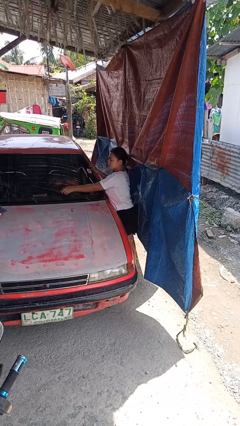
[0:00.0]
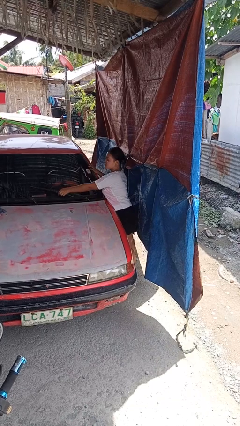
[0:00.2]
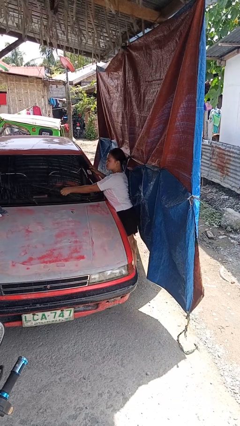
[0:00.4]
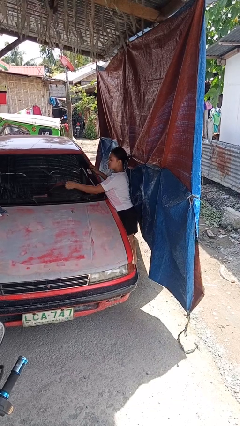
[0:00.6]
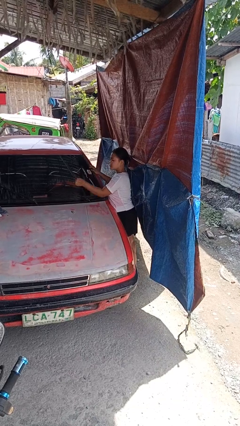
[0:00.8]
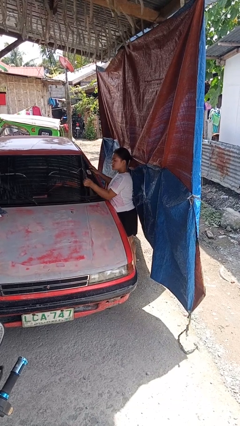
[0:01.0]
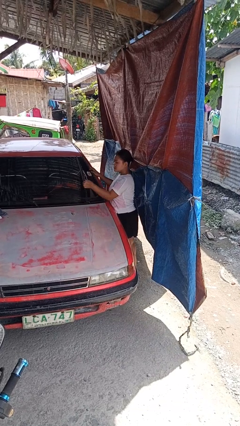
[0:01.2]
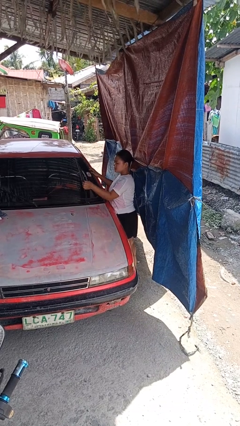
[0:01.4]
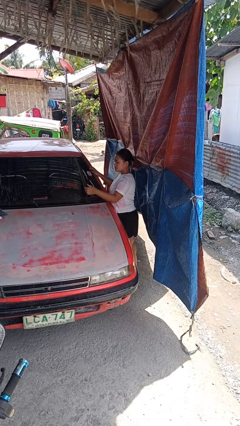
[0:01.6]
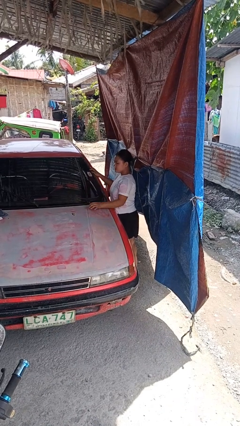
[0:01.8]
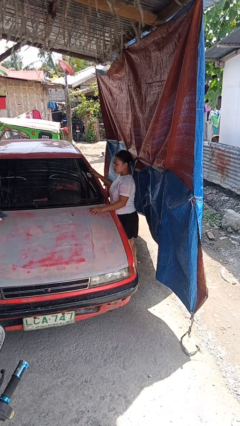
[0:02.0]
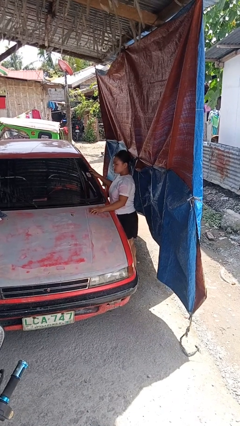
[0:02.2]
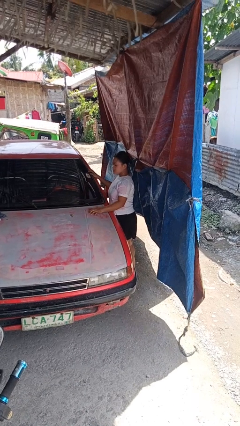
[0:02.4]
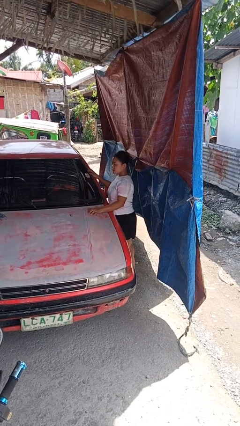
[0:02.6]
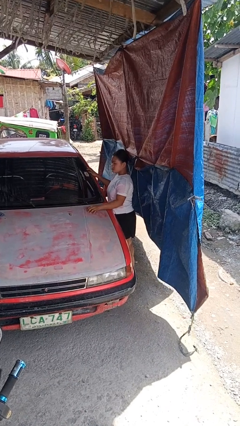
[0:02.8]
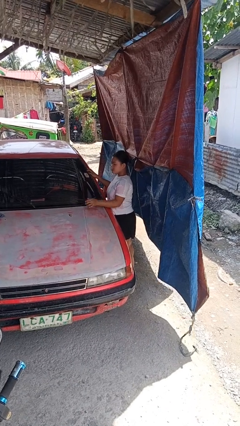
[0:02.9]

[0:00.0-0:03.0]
person flips up car wipers

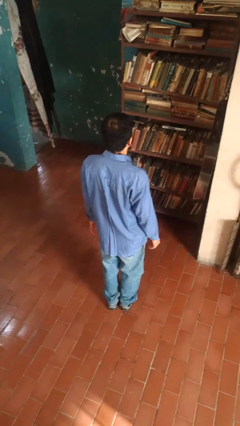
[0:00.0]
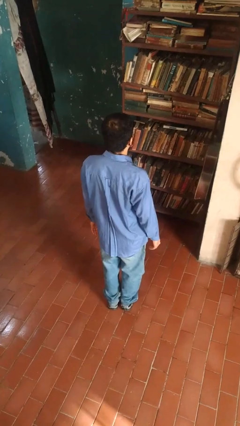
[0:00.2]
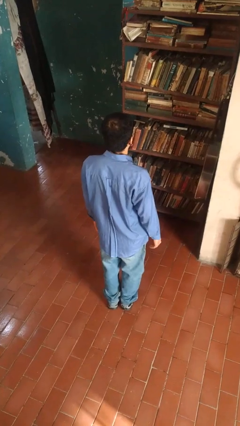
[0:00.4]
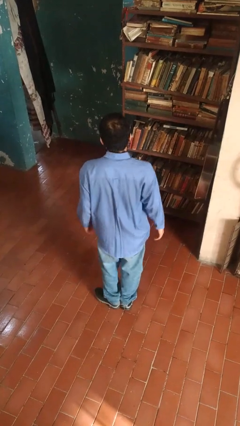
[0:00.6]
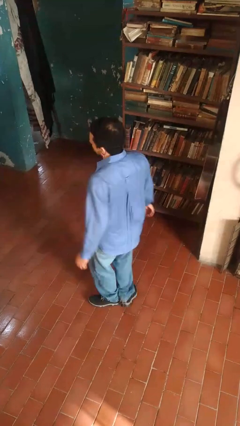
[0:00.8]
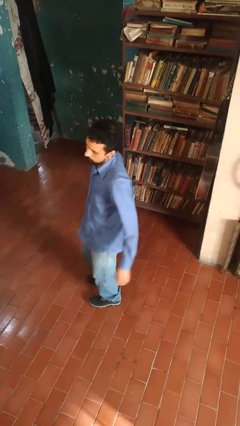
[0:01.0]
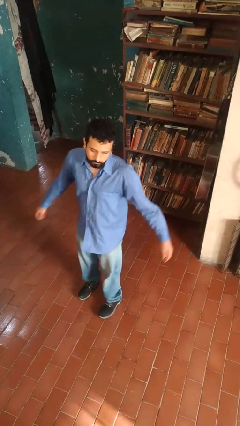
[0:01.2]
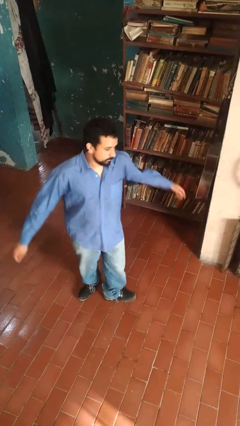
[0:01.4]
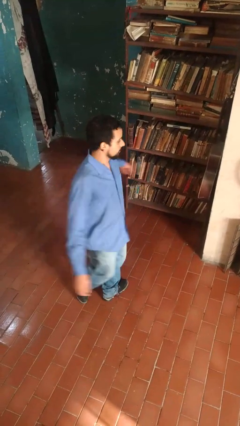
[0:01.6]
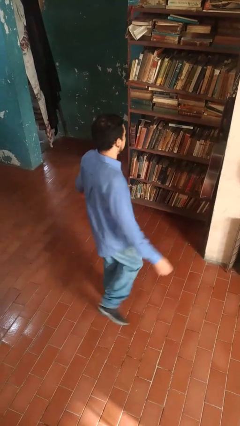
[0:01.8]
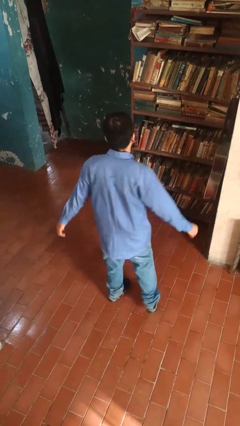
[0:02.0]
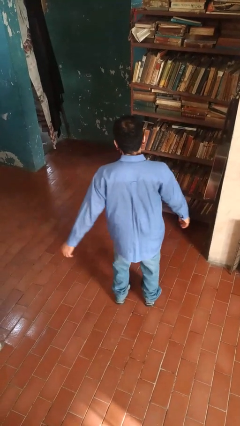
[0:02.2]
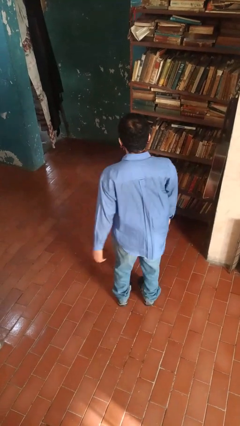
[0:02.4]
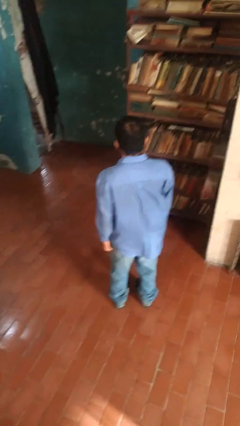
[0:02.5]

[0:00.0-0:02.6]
person twirls

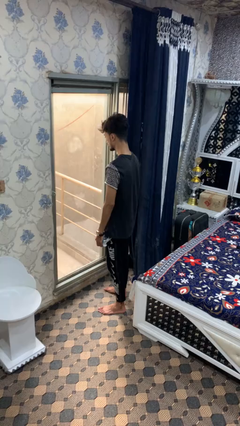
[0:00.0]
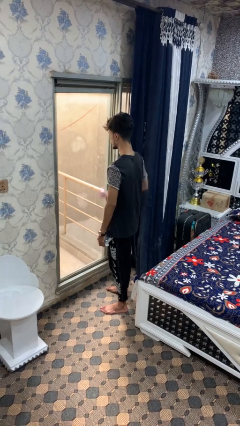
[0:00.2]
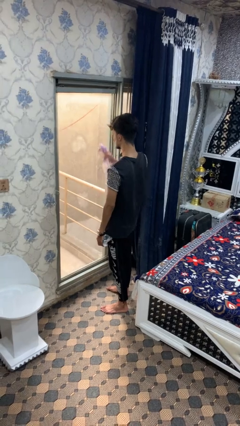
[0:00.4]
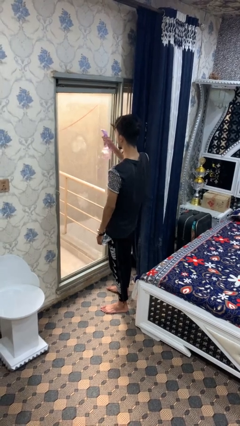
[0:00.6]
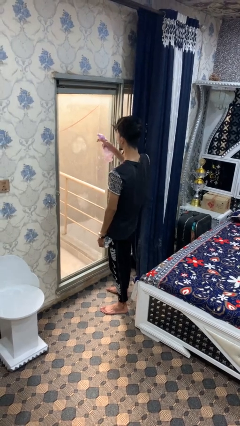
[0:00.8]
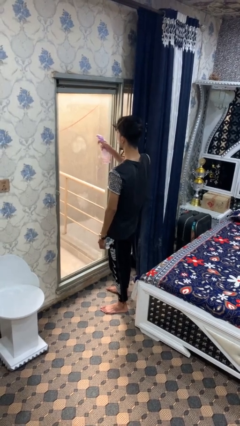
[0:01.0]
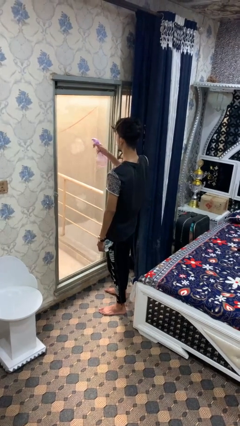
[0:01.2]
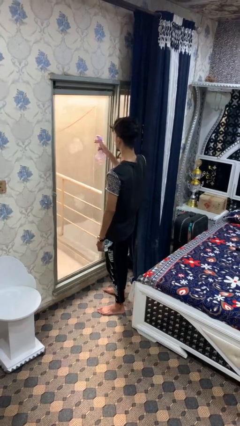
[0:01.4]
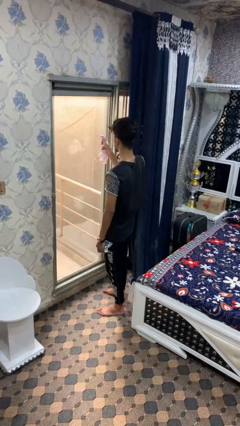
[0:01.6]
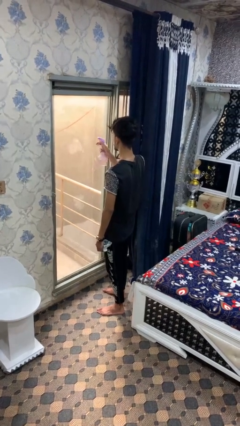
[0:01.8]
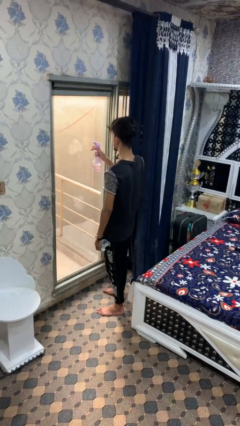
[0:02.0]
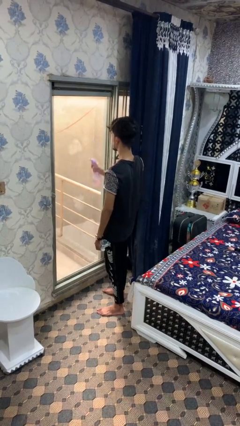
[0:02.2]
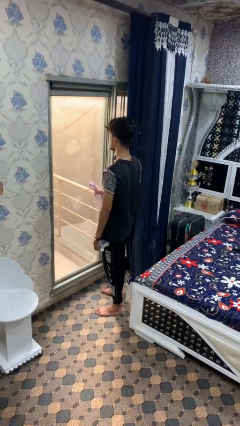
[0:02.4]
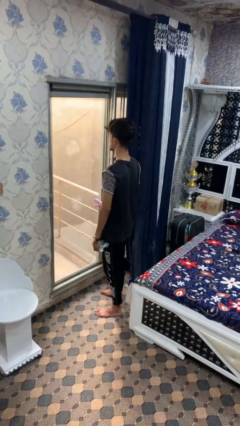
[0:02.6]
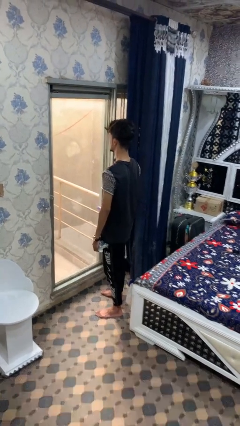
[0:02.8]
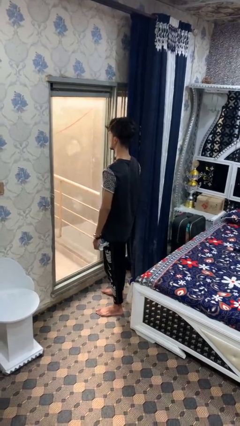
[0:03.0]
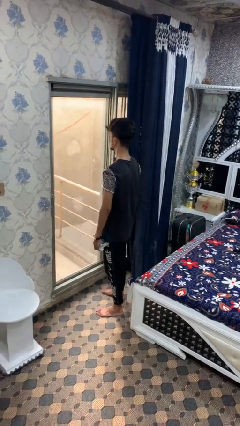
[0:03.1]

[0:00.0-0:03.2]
person sprays from bottle

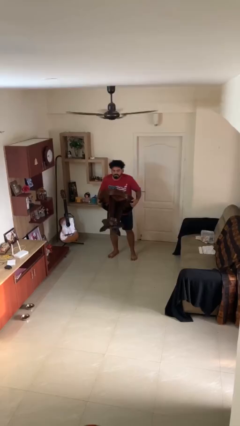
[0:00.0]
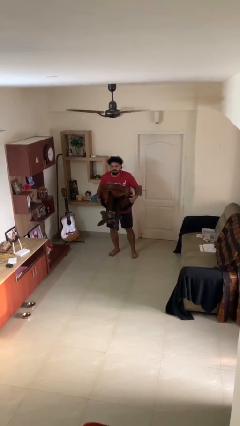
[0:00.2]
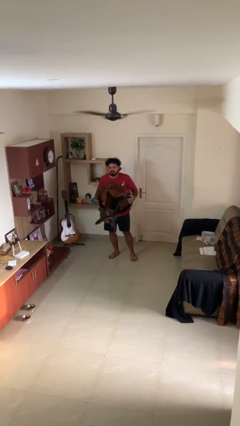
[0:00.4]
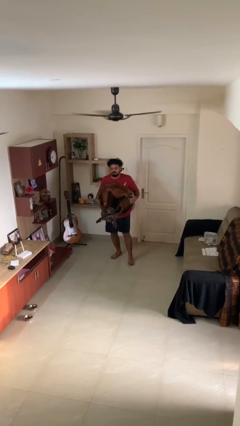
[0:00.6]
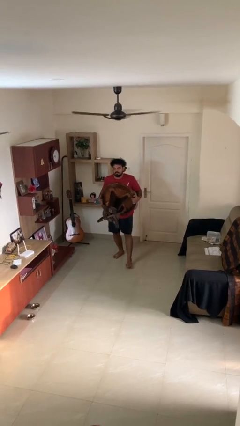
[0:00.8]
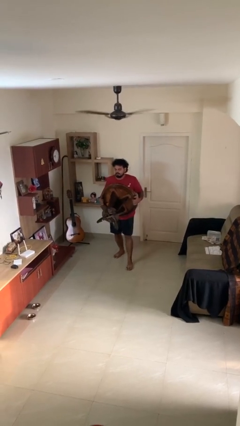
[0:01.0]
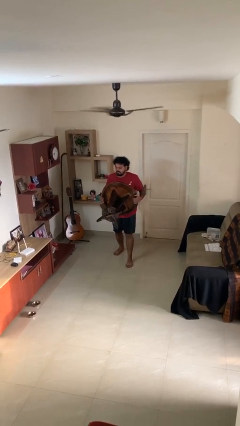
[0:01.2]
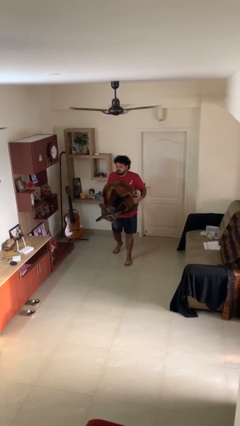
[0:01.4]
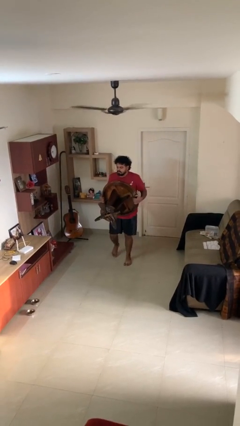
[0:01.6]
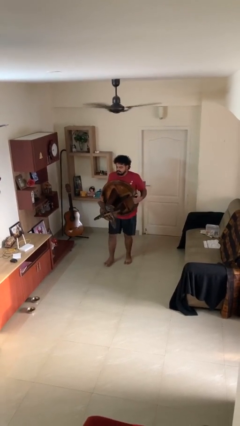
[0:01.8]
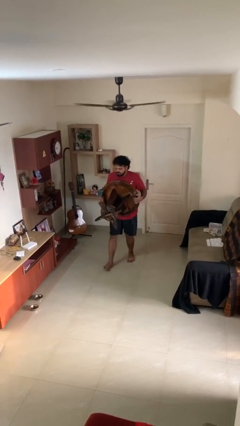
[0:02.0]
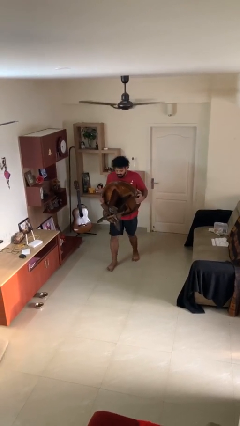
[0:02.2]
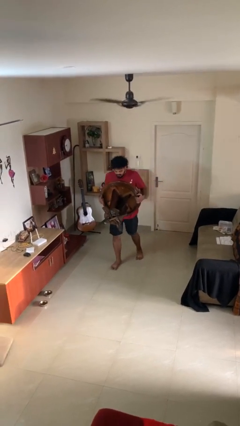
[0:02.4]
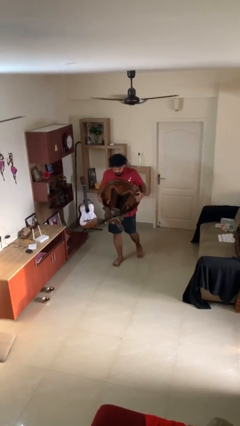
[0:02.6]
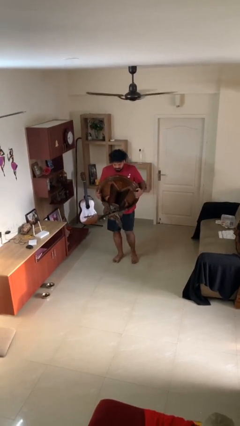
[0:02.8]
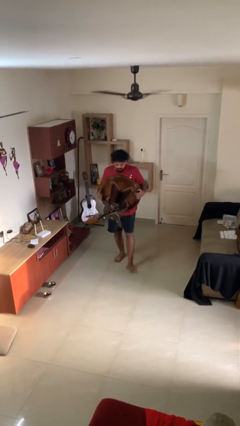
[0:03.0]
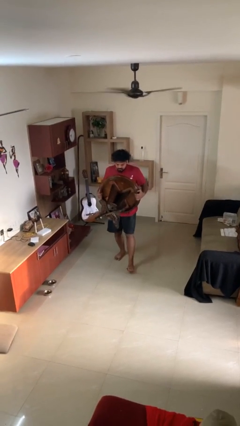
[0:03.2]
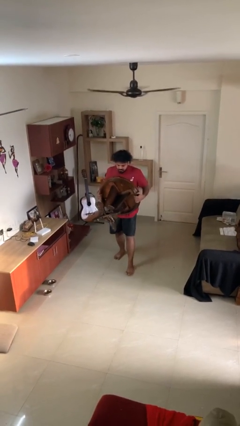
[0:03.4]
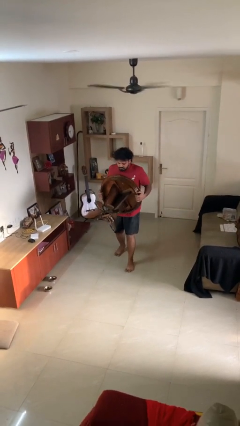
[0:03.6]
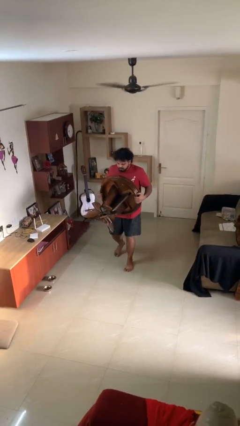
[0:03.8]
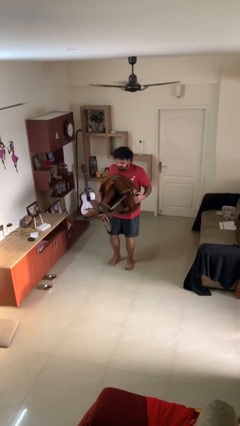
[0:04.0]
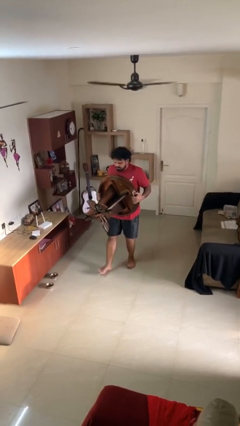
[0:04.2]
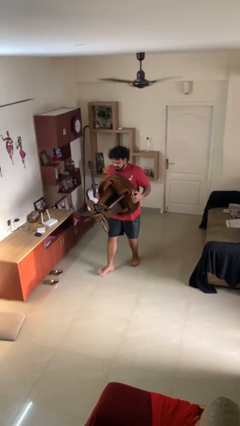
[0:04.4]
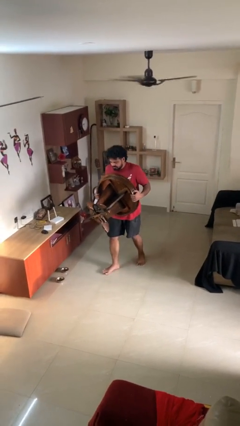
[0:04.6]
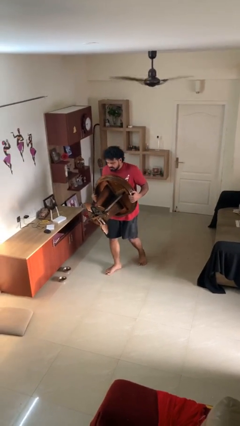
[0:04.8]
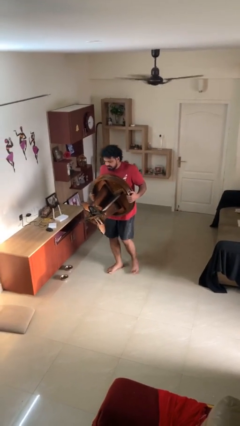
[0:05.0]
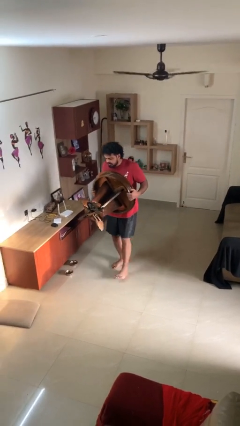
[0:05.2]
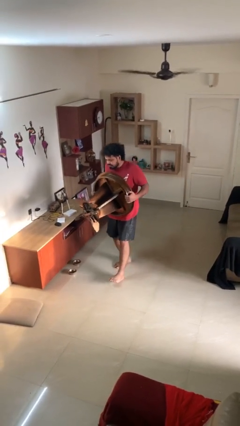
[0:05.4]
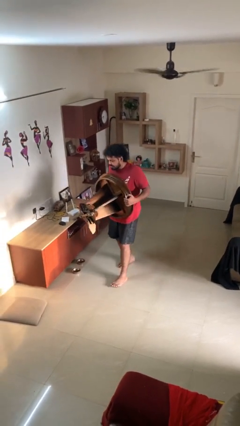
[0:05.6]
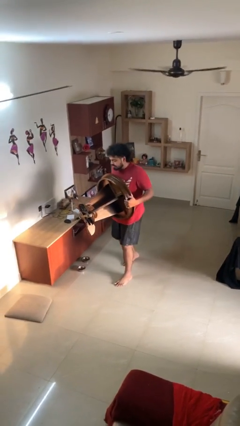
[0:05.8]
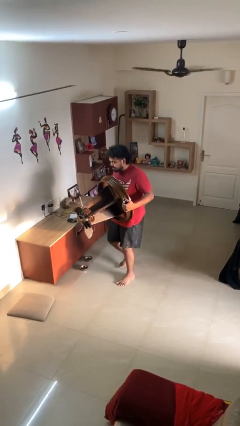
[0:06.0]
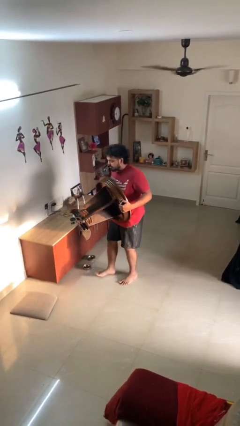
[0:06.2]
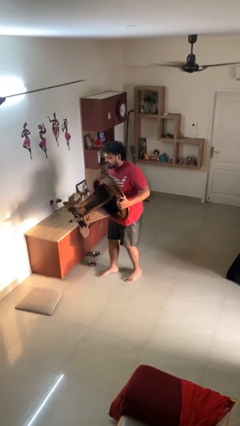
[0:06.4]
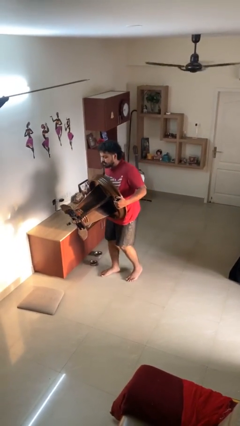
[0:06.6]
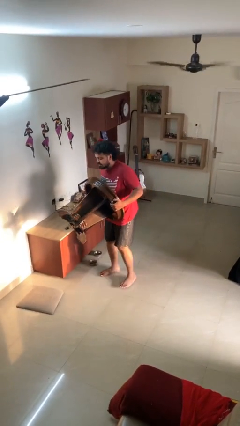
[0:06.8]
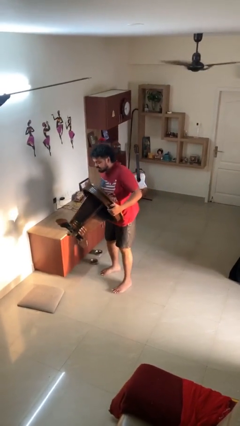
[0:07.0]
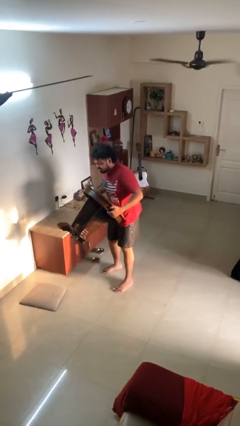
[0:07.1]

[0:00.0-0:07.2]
person carries heavy object

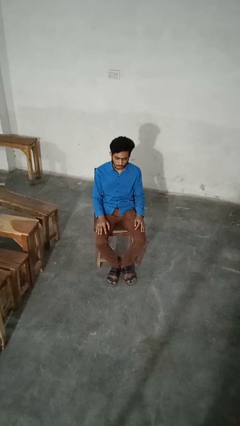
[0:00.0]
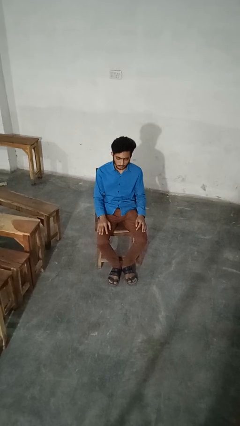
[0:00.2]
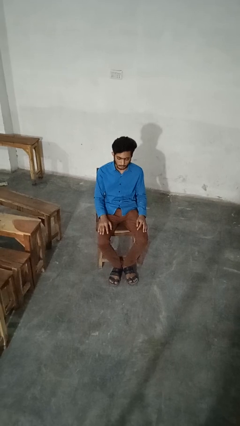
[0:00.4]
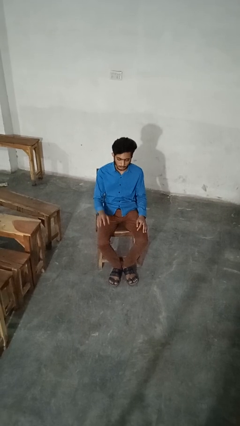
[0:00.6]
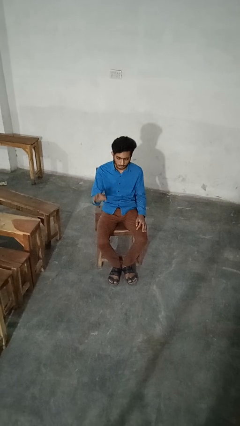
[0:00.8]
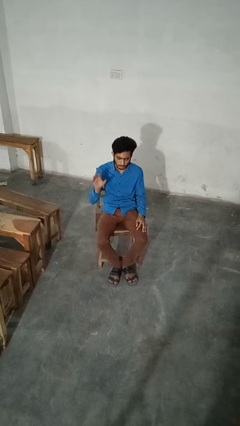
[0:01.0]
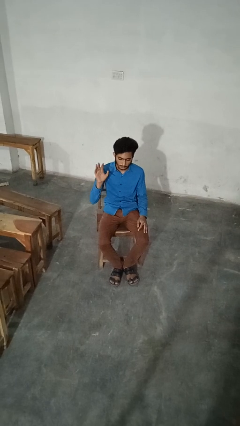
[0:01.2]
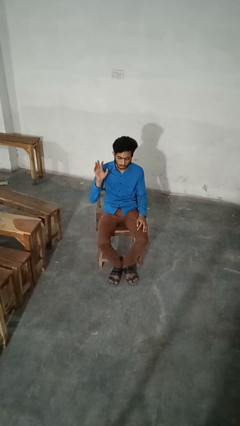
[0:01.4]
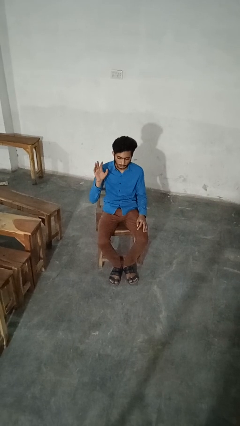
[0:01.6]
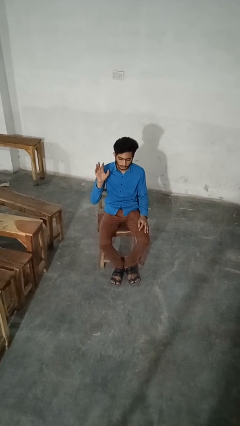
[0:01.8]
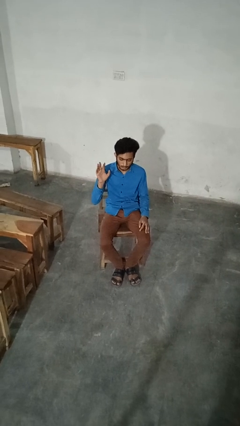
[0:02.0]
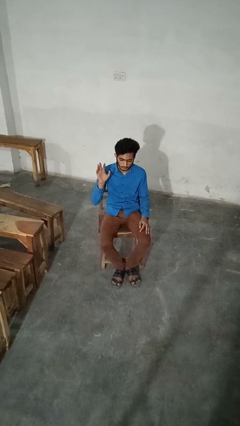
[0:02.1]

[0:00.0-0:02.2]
person gestures raise hand
